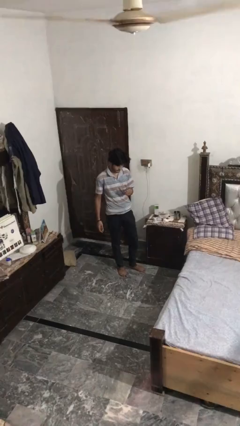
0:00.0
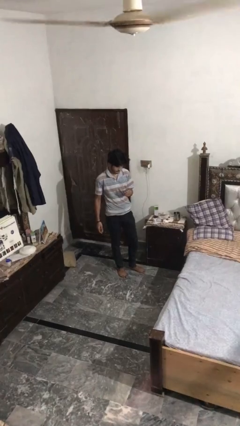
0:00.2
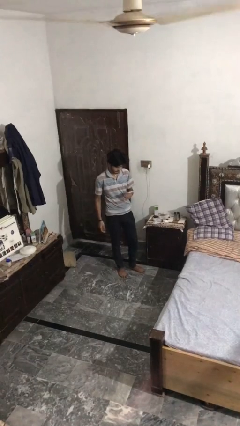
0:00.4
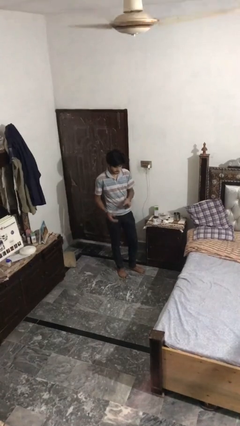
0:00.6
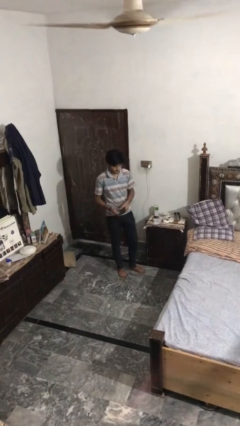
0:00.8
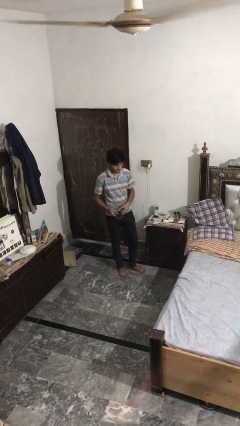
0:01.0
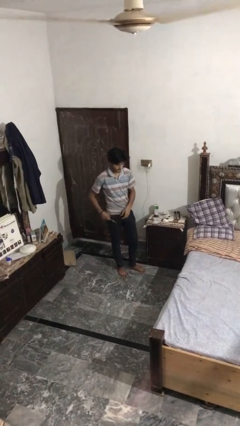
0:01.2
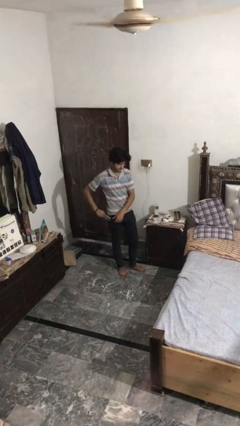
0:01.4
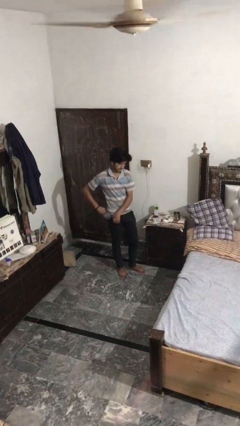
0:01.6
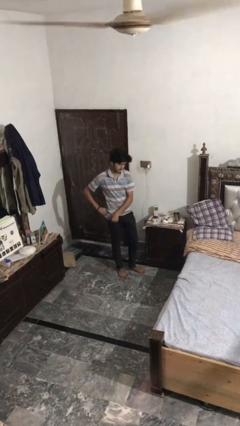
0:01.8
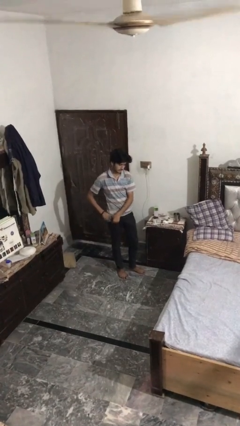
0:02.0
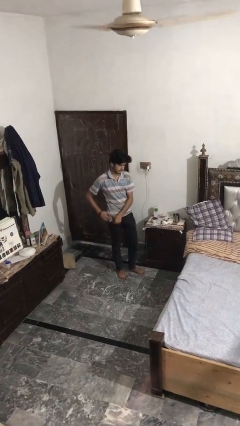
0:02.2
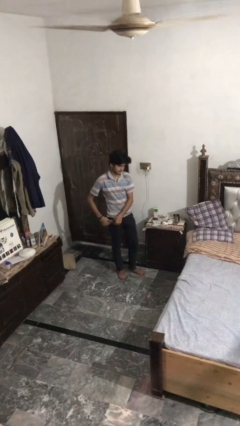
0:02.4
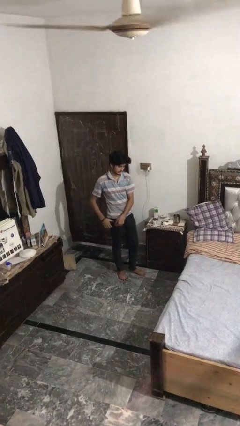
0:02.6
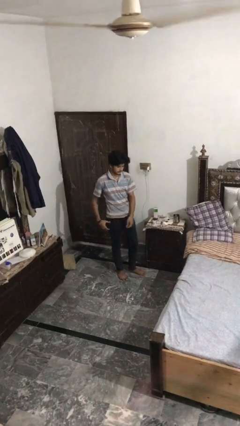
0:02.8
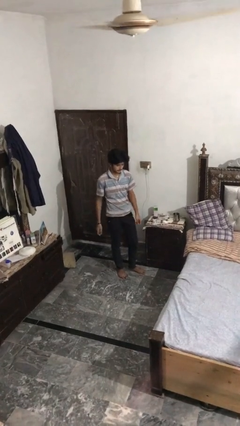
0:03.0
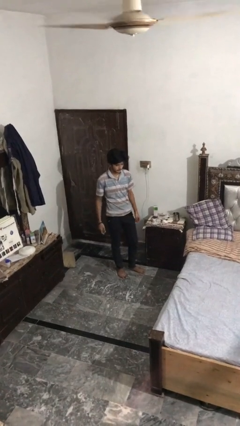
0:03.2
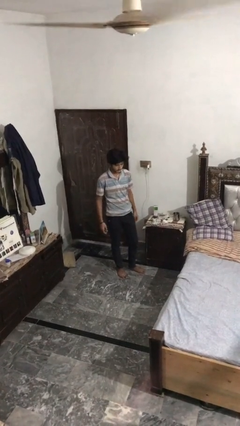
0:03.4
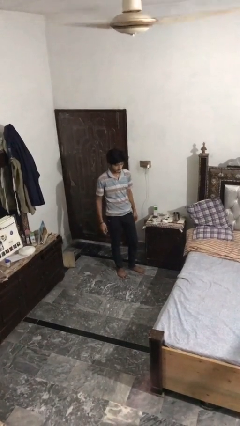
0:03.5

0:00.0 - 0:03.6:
person puts phone into pocket

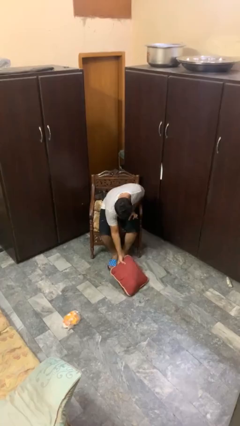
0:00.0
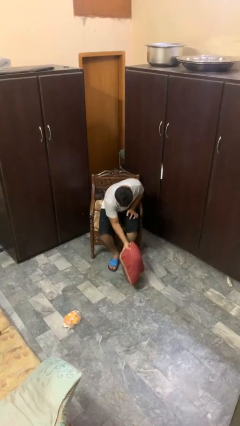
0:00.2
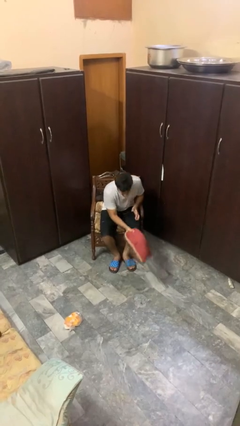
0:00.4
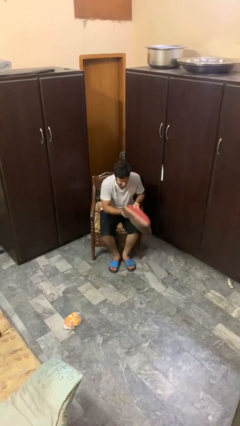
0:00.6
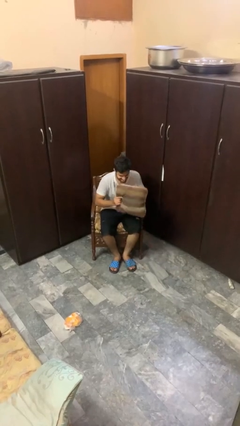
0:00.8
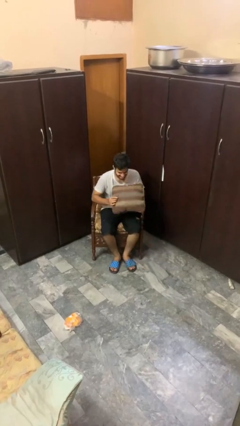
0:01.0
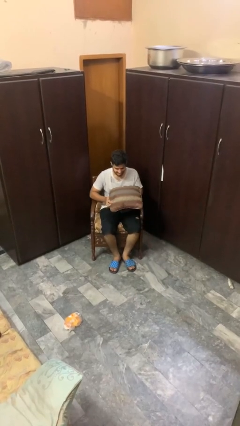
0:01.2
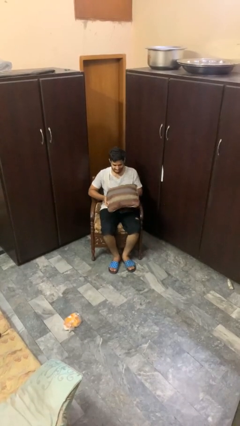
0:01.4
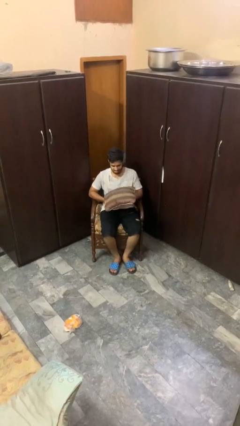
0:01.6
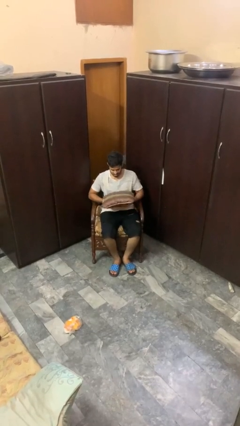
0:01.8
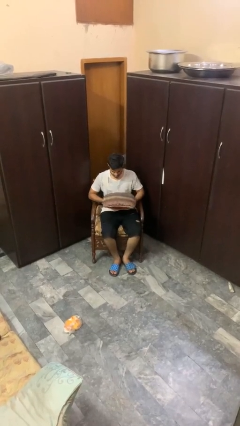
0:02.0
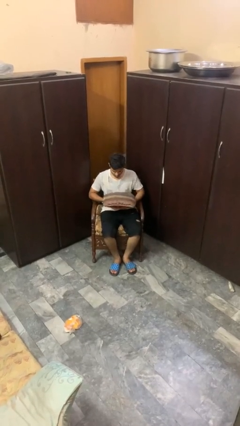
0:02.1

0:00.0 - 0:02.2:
person picks up object from floor

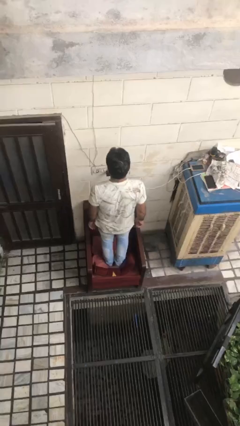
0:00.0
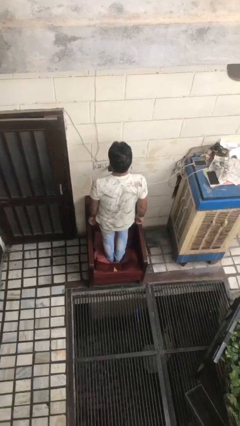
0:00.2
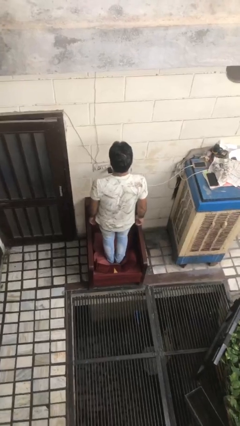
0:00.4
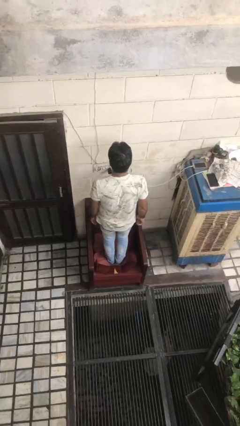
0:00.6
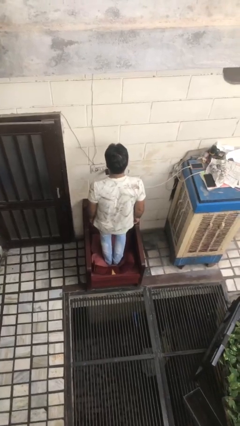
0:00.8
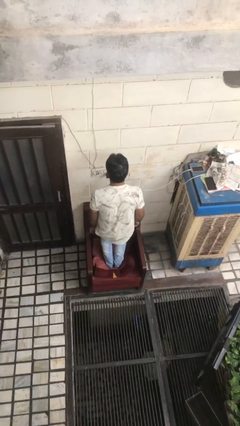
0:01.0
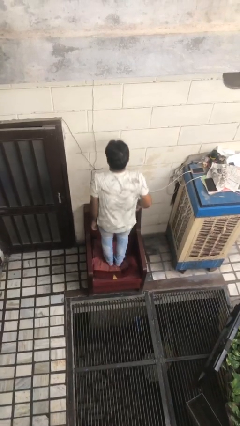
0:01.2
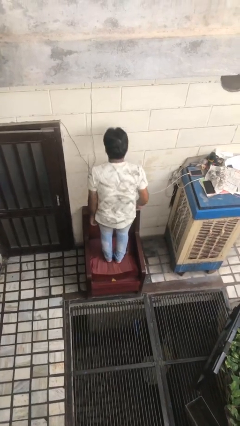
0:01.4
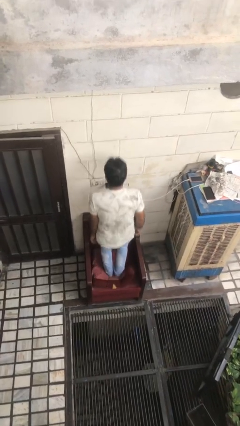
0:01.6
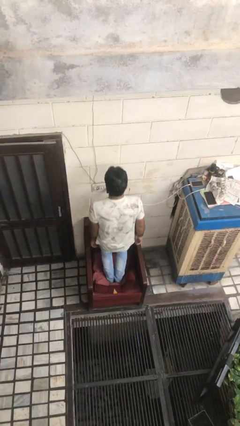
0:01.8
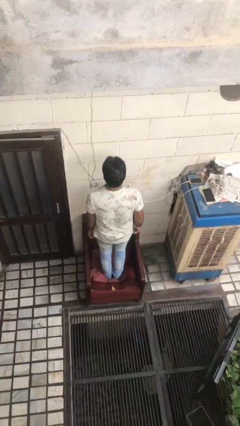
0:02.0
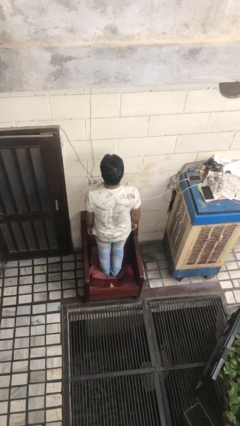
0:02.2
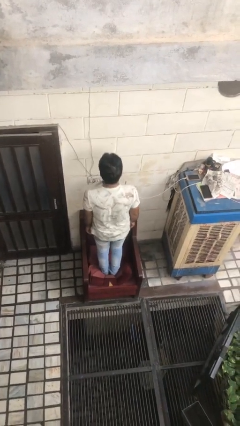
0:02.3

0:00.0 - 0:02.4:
person jumps on couch

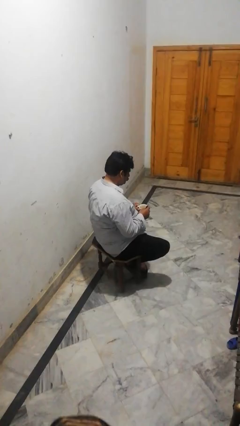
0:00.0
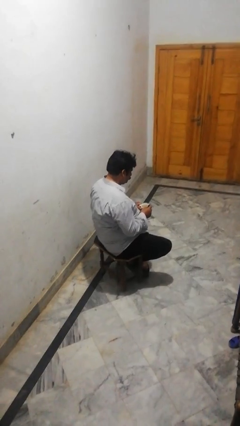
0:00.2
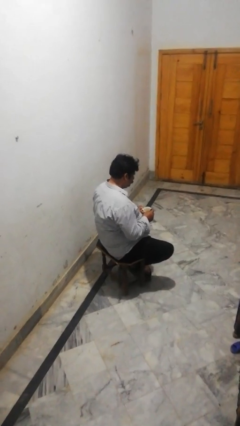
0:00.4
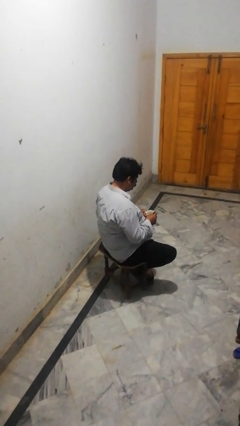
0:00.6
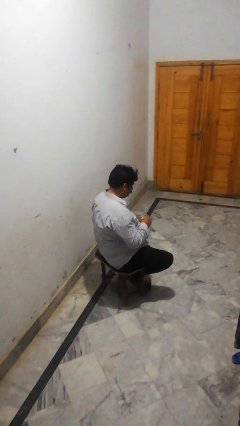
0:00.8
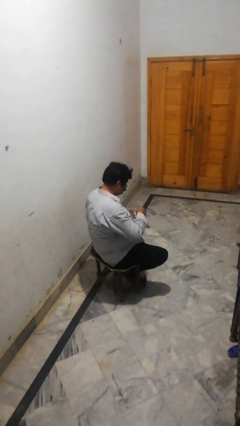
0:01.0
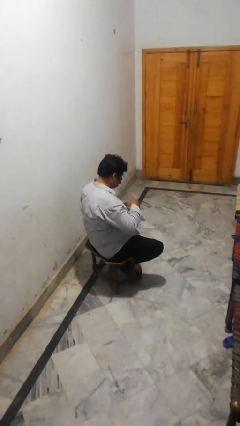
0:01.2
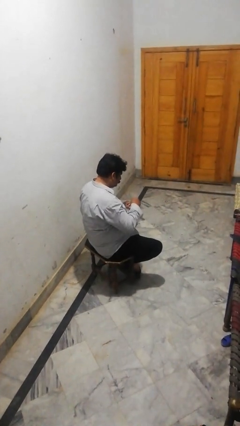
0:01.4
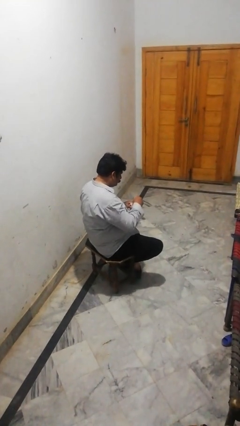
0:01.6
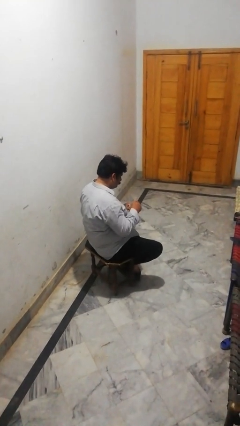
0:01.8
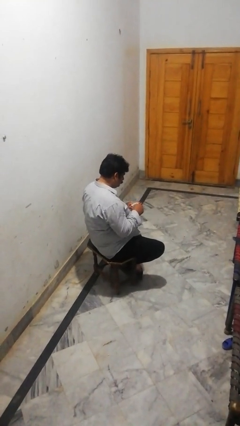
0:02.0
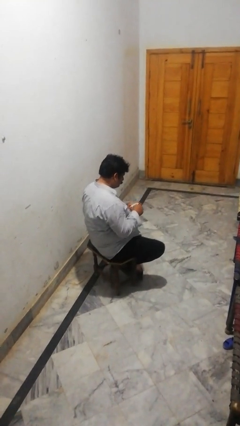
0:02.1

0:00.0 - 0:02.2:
person stirs mug

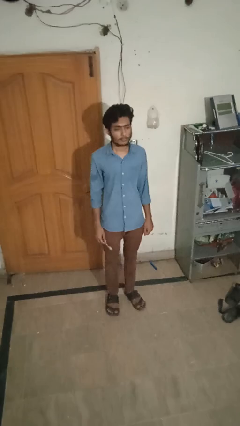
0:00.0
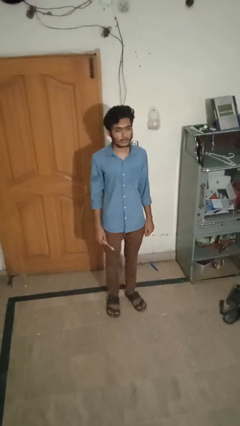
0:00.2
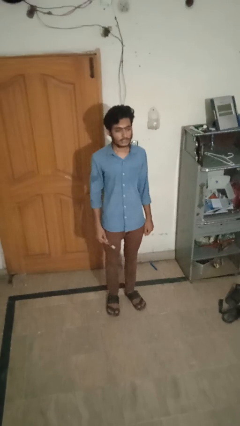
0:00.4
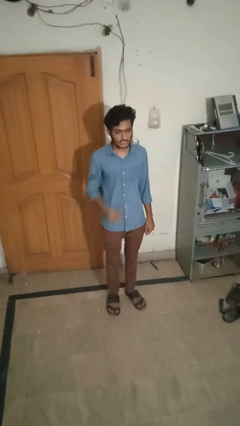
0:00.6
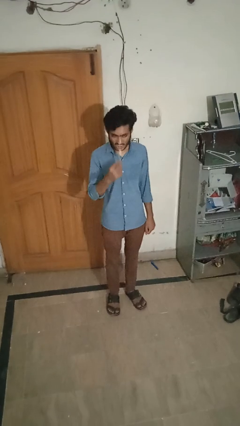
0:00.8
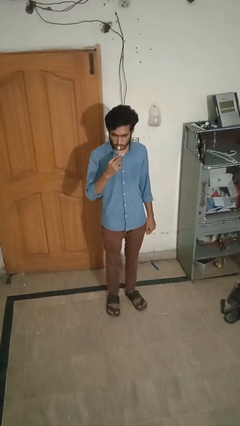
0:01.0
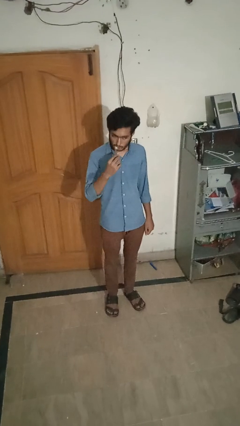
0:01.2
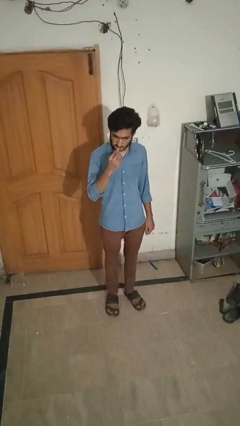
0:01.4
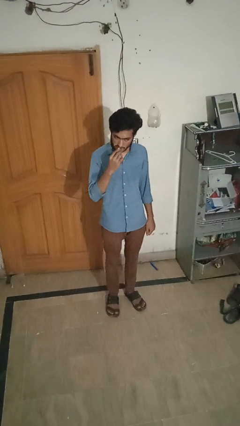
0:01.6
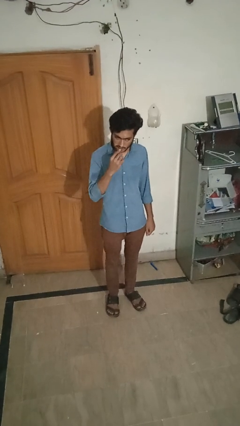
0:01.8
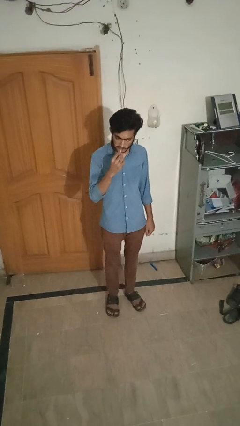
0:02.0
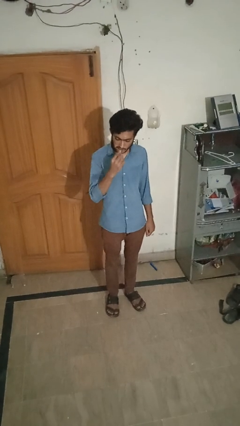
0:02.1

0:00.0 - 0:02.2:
person brushes teeth

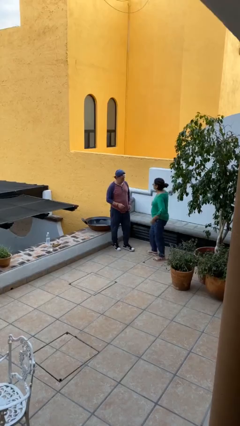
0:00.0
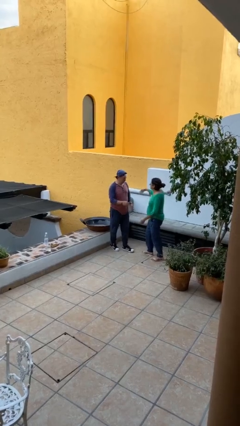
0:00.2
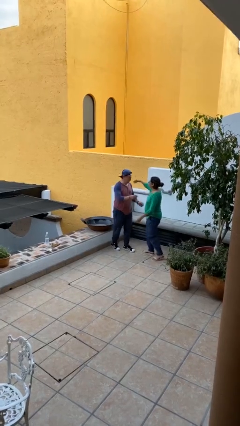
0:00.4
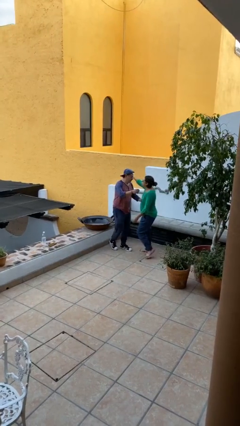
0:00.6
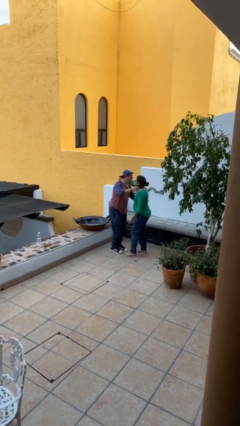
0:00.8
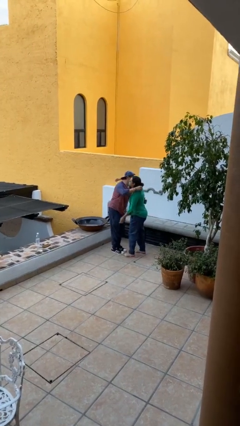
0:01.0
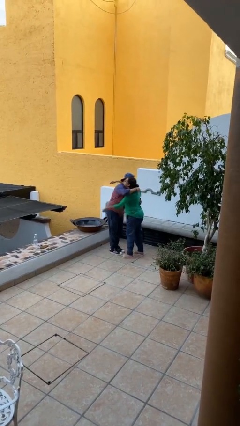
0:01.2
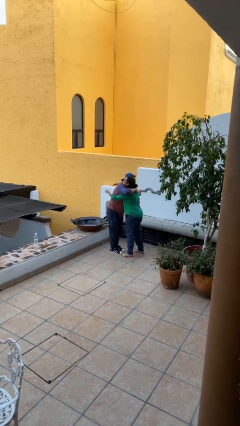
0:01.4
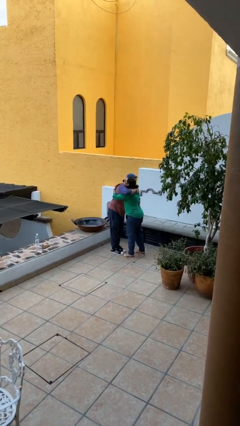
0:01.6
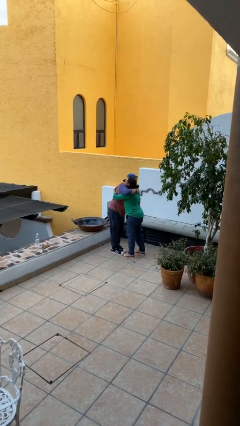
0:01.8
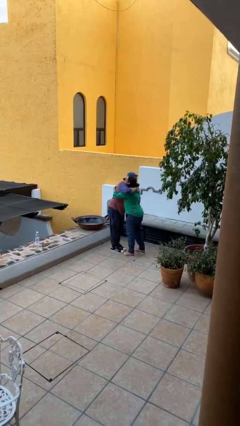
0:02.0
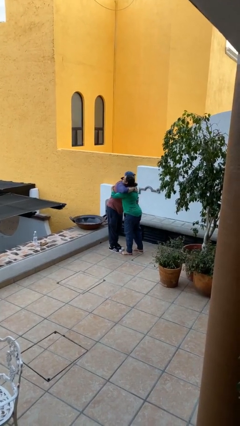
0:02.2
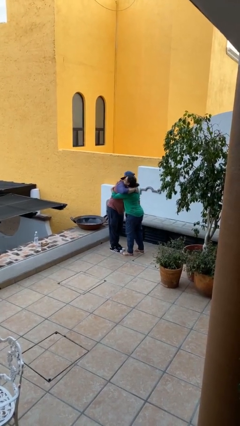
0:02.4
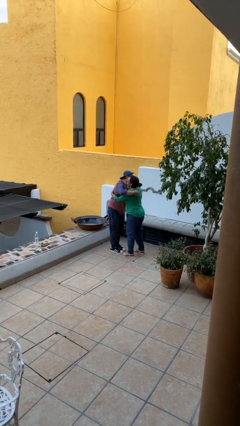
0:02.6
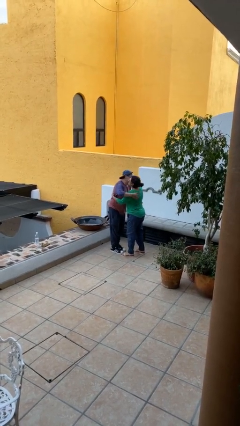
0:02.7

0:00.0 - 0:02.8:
person embraces person

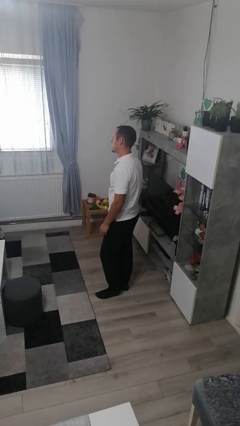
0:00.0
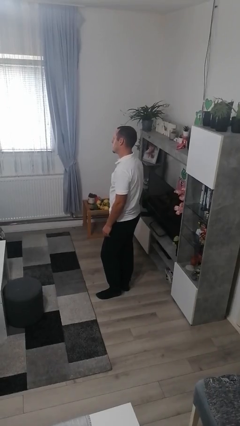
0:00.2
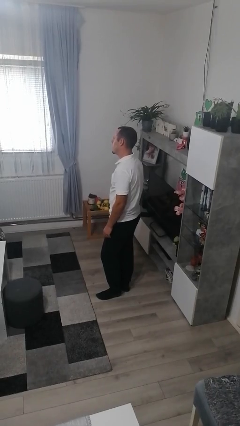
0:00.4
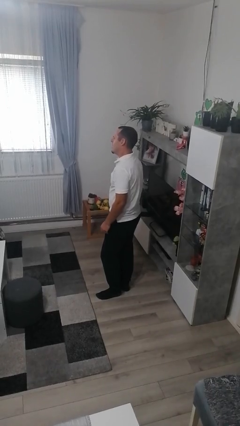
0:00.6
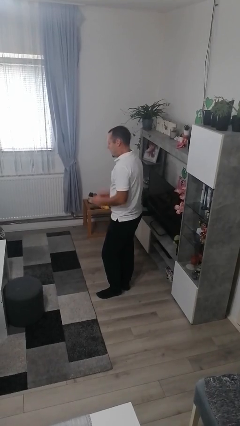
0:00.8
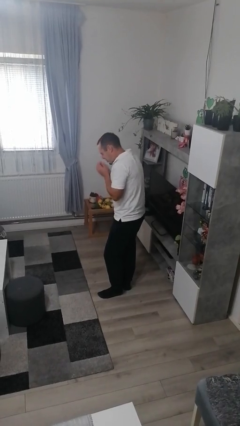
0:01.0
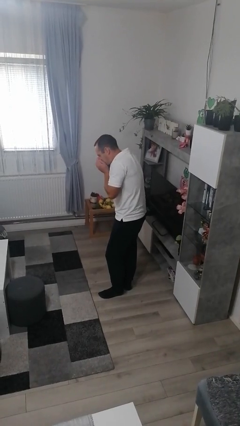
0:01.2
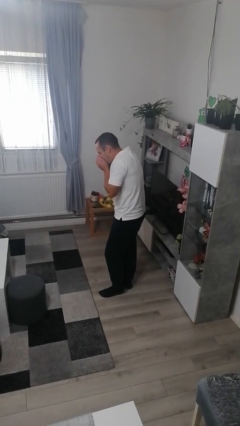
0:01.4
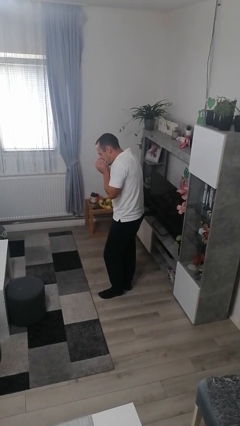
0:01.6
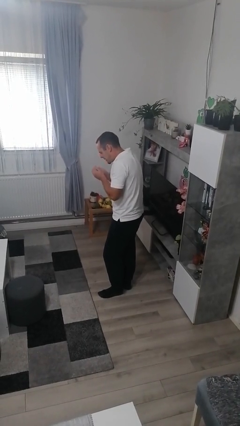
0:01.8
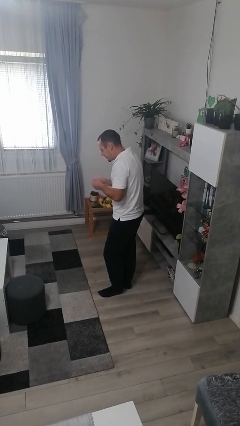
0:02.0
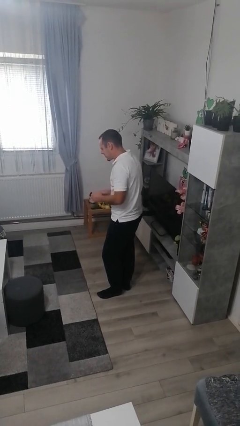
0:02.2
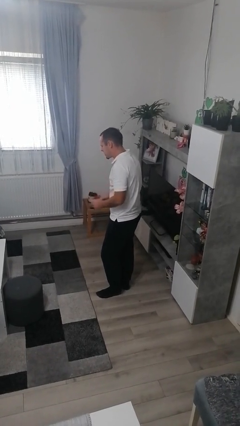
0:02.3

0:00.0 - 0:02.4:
person sneezes into hand
